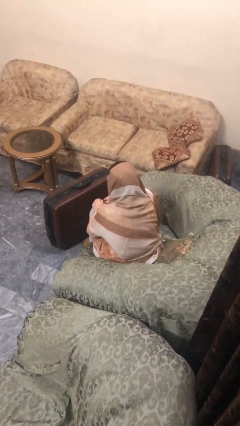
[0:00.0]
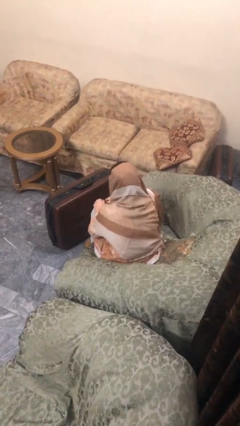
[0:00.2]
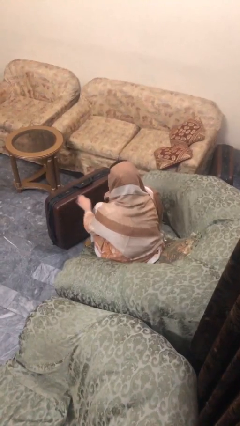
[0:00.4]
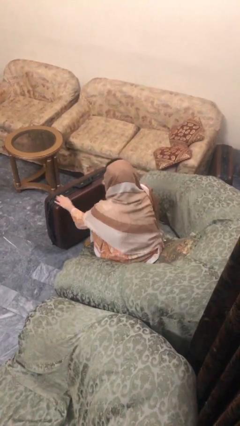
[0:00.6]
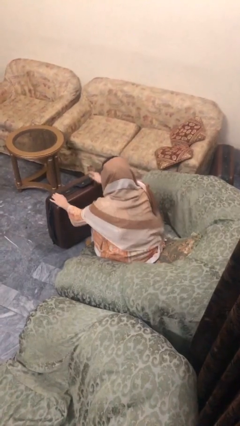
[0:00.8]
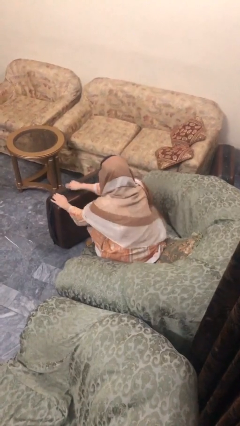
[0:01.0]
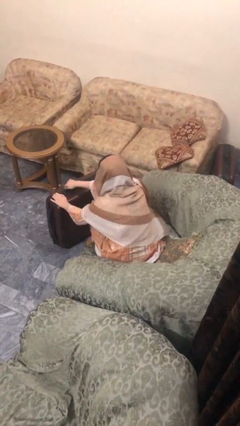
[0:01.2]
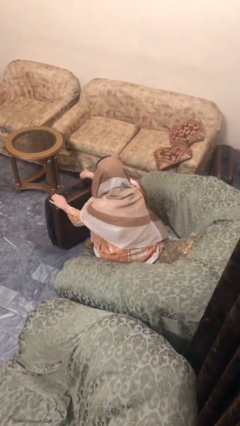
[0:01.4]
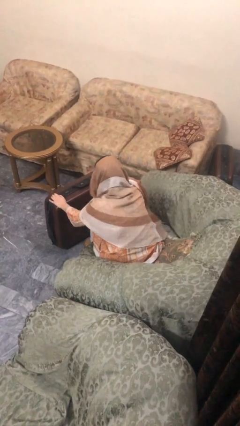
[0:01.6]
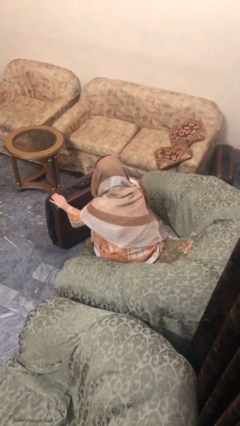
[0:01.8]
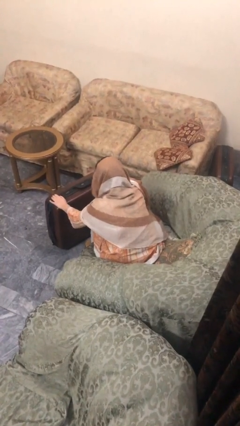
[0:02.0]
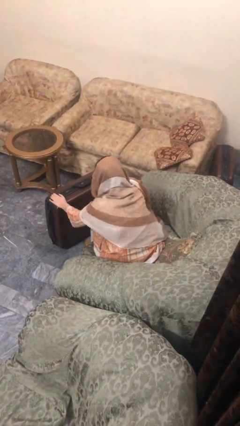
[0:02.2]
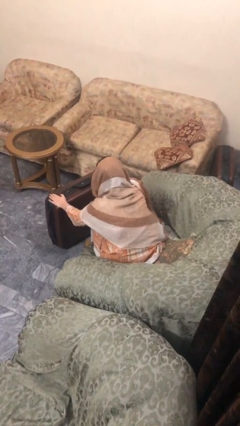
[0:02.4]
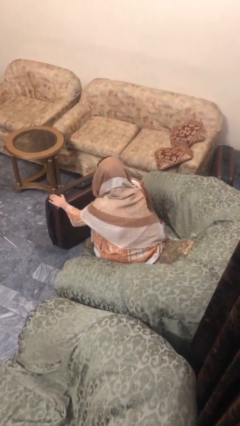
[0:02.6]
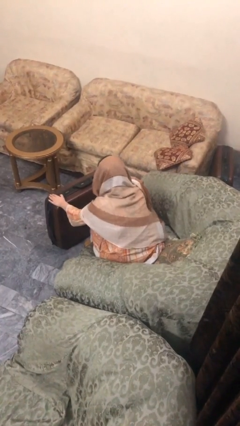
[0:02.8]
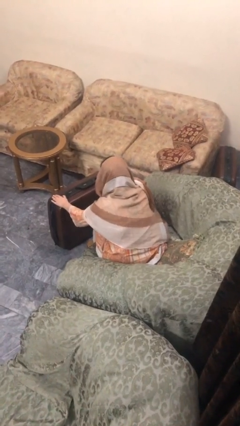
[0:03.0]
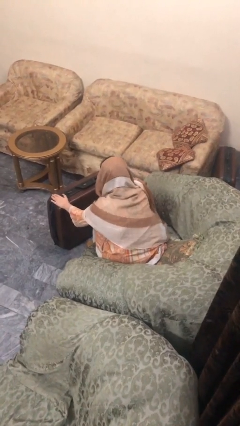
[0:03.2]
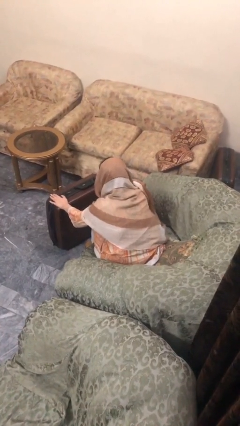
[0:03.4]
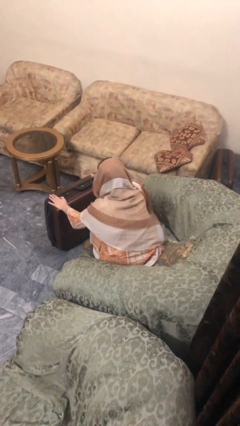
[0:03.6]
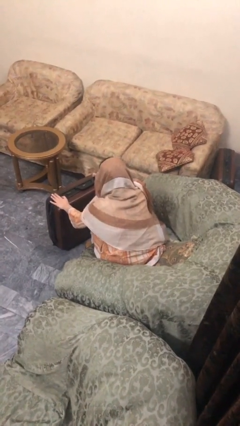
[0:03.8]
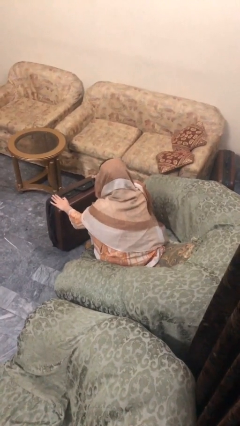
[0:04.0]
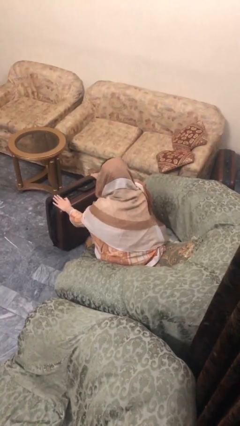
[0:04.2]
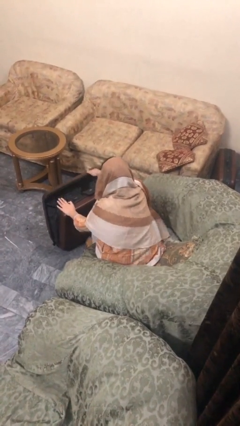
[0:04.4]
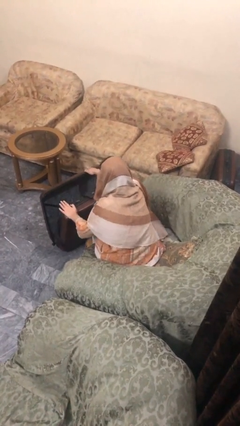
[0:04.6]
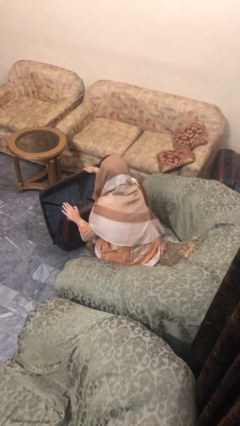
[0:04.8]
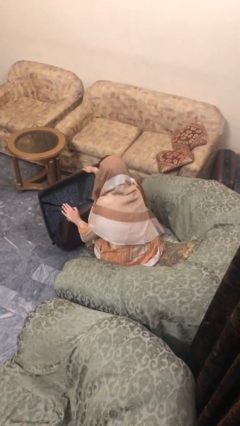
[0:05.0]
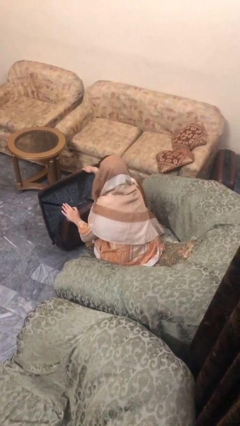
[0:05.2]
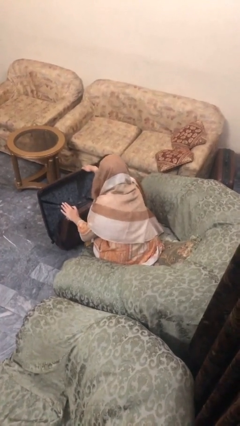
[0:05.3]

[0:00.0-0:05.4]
person opens suitcase

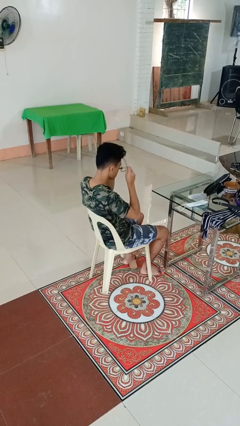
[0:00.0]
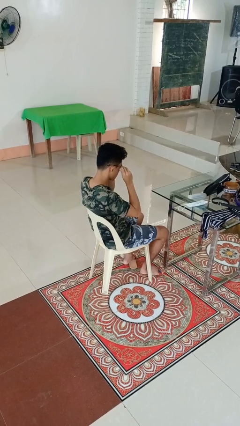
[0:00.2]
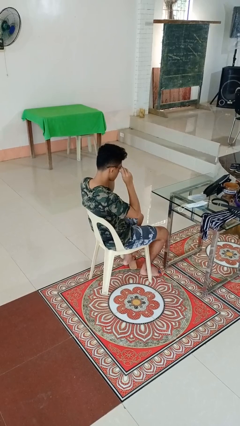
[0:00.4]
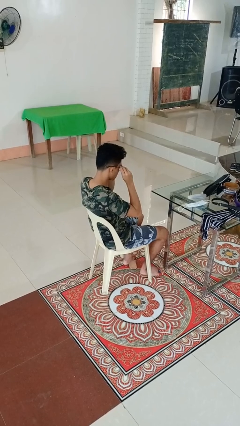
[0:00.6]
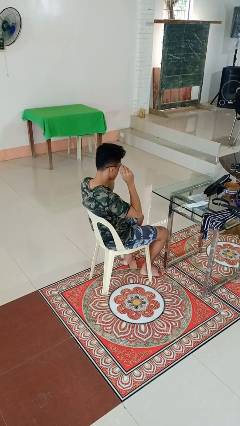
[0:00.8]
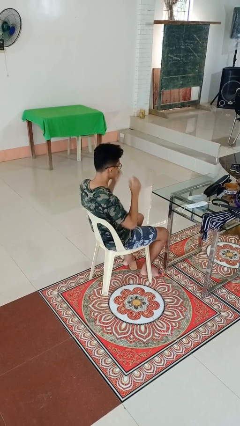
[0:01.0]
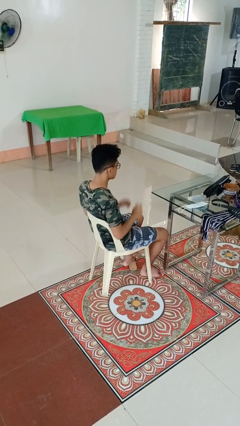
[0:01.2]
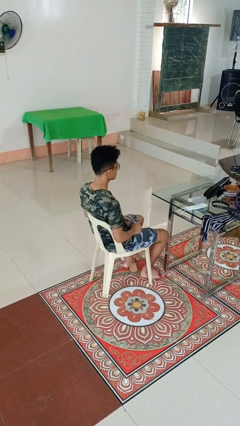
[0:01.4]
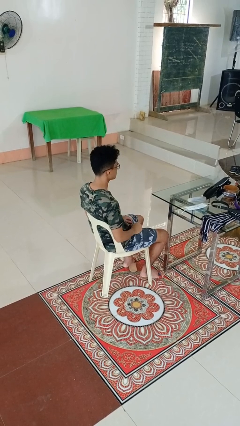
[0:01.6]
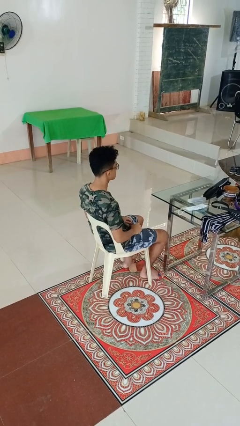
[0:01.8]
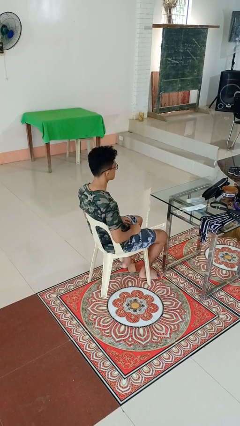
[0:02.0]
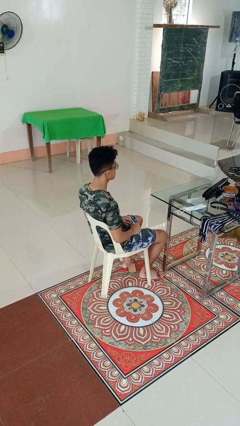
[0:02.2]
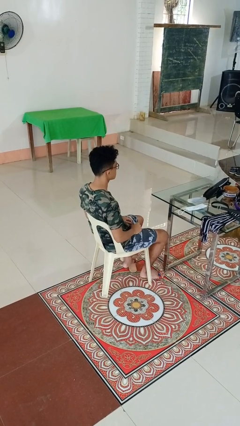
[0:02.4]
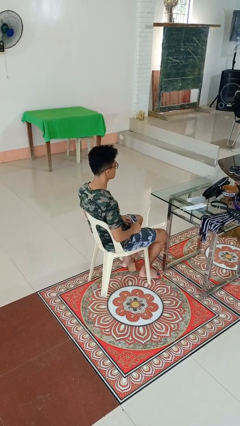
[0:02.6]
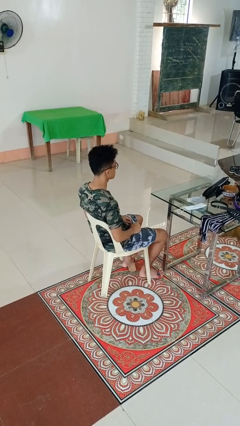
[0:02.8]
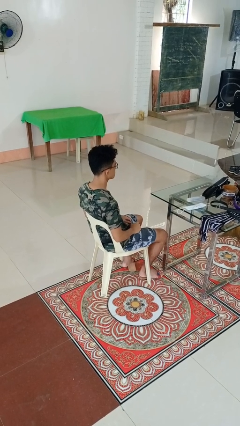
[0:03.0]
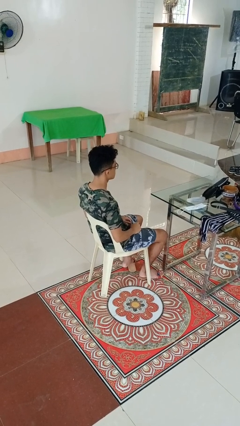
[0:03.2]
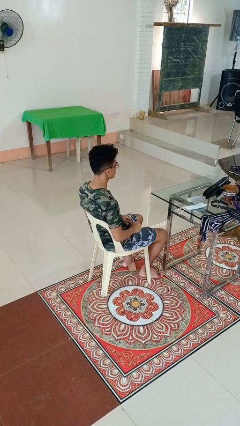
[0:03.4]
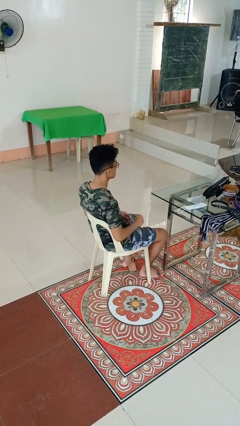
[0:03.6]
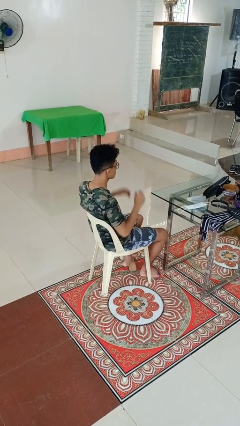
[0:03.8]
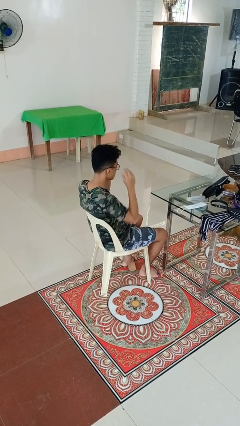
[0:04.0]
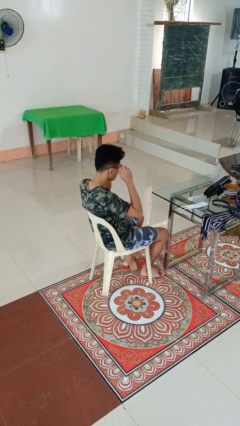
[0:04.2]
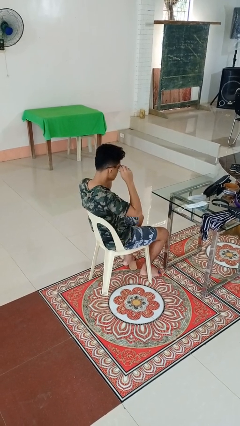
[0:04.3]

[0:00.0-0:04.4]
person puts on glasses

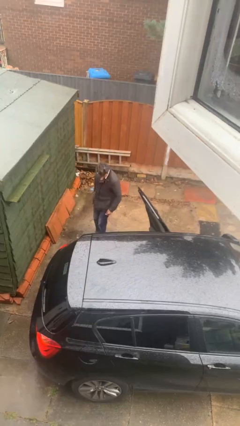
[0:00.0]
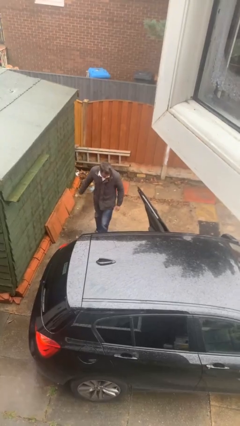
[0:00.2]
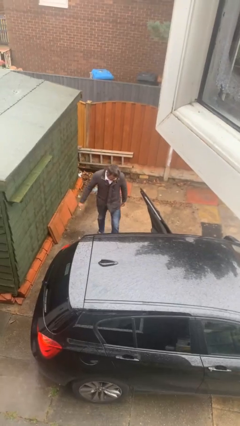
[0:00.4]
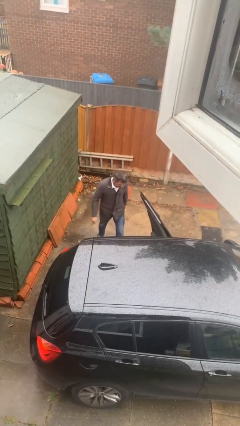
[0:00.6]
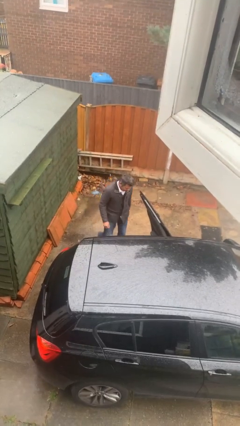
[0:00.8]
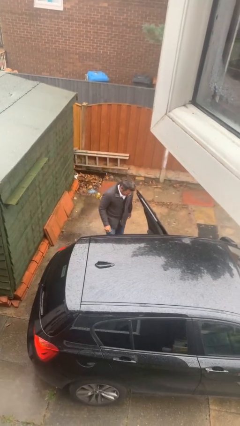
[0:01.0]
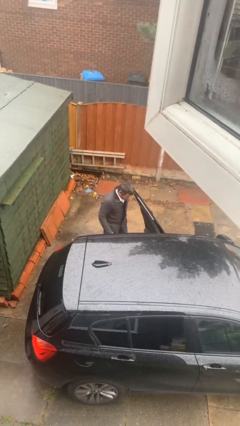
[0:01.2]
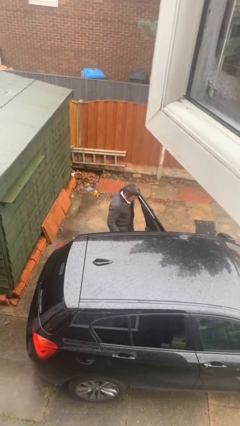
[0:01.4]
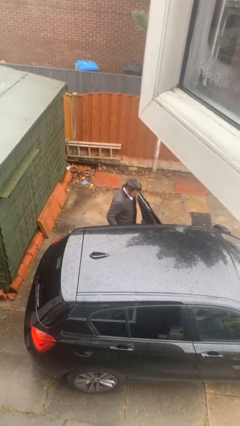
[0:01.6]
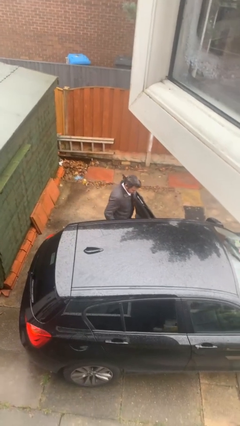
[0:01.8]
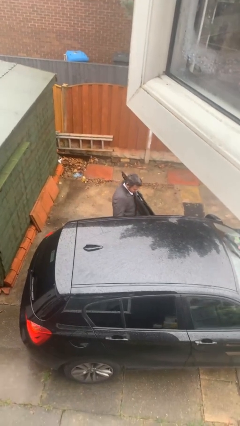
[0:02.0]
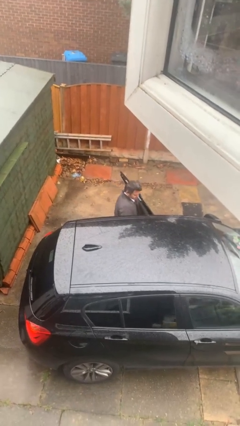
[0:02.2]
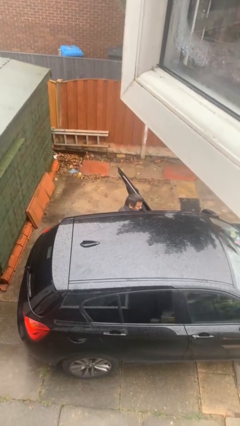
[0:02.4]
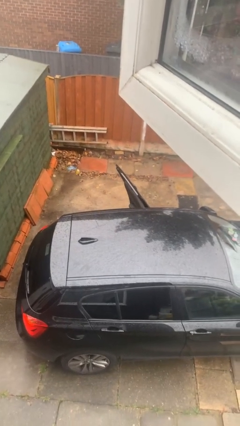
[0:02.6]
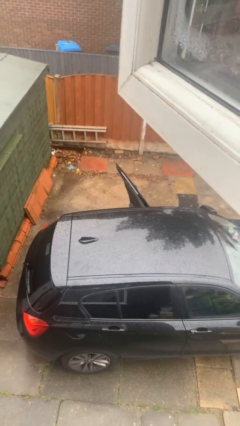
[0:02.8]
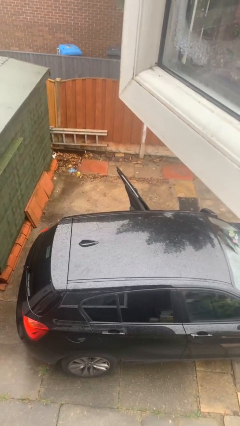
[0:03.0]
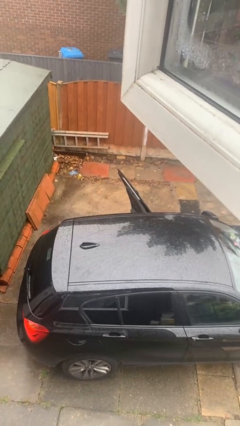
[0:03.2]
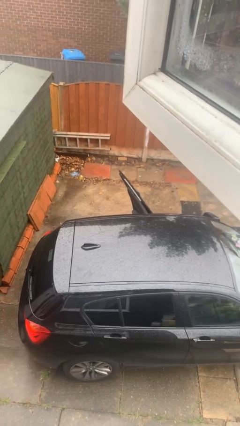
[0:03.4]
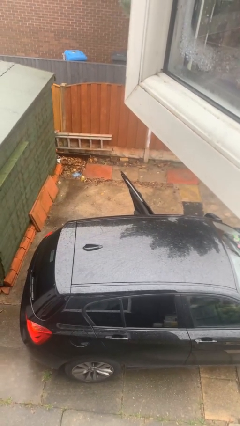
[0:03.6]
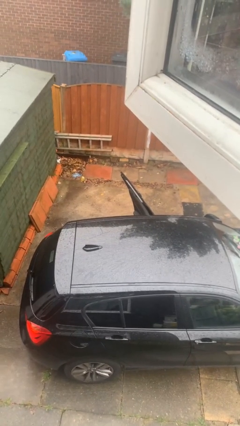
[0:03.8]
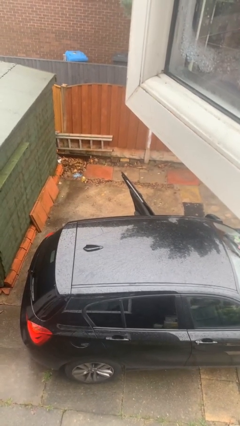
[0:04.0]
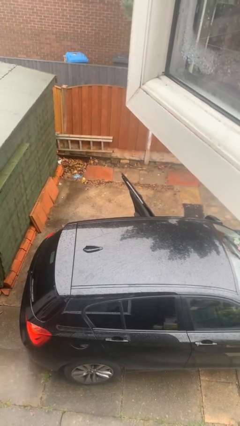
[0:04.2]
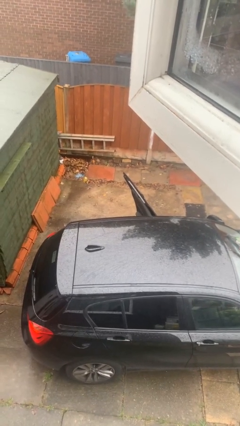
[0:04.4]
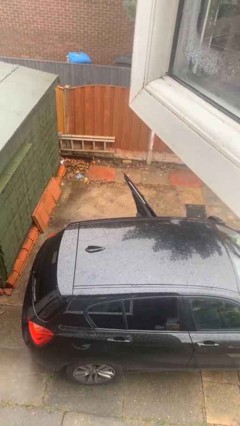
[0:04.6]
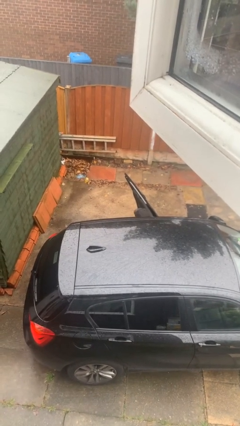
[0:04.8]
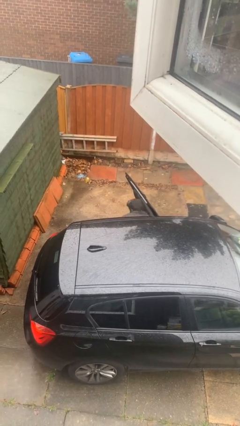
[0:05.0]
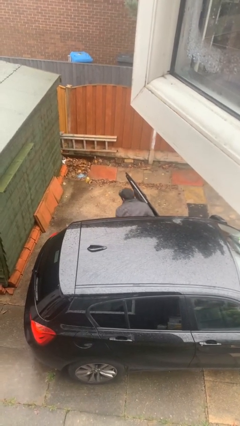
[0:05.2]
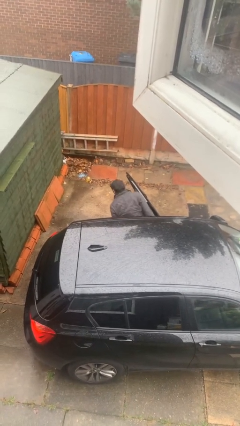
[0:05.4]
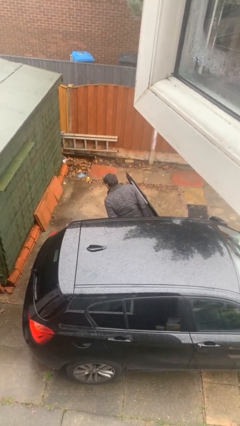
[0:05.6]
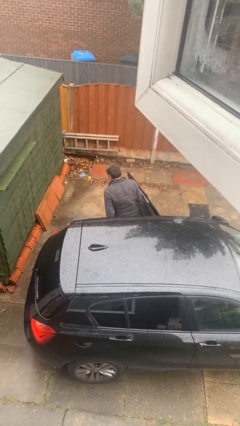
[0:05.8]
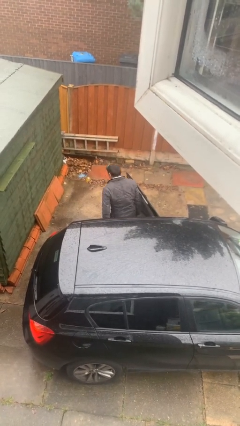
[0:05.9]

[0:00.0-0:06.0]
person enters car

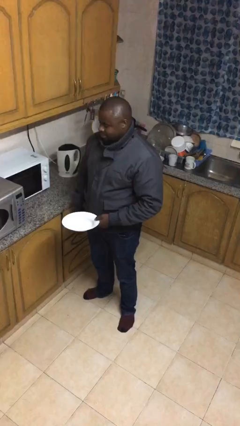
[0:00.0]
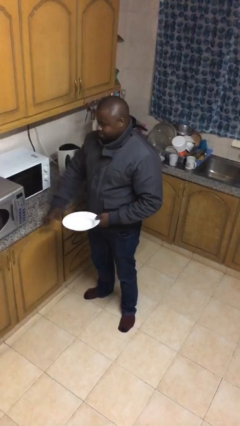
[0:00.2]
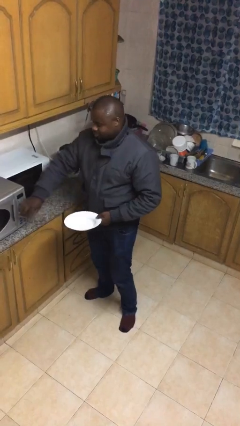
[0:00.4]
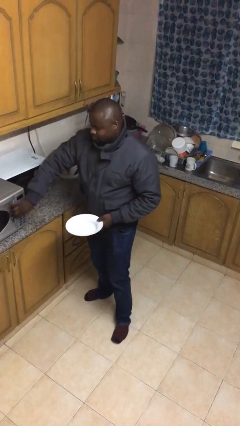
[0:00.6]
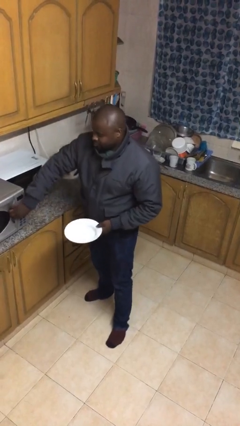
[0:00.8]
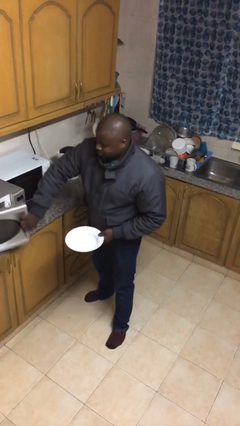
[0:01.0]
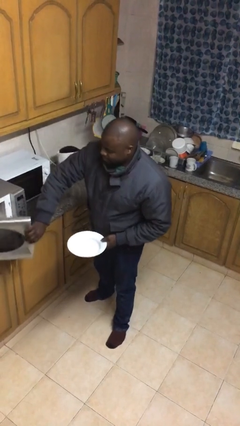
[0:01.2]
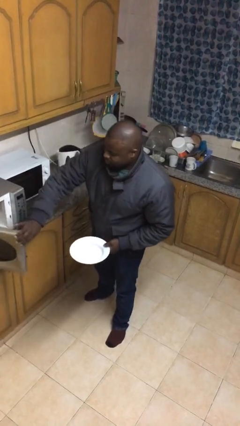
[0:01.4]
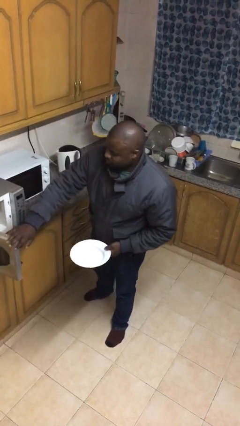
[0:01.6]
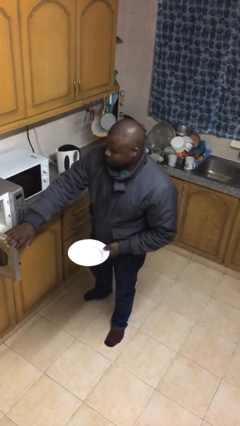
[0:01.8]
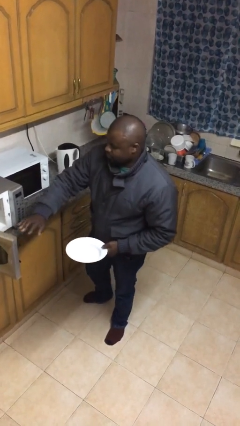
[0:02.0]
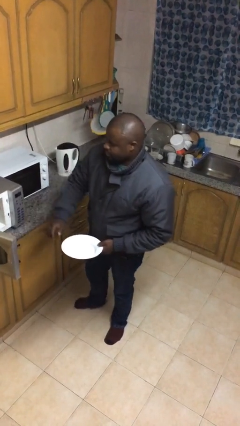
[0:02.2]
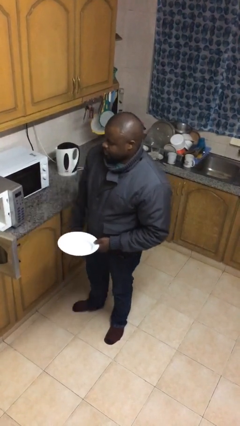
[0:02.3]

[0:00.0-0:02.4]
person opens microwave
